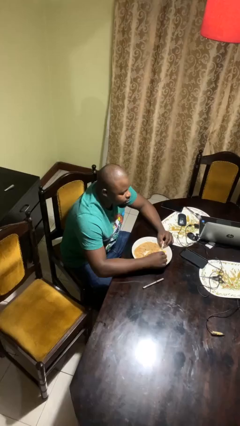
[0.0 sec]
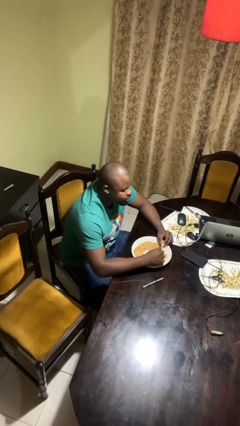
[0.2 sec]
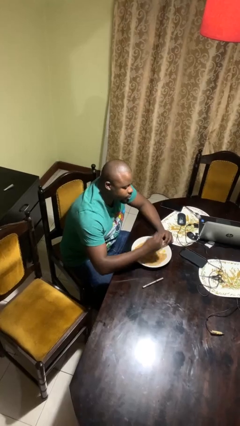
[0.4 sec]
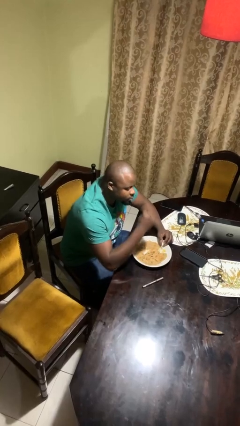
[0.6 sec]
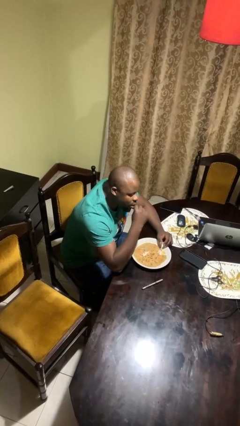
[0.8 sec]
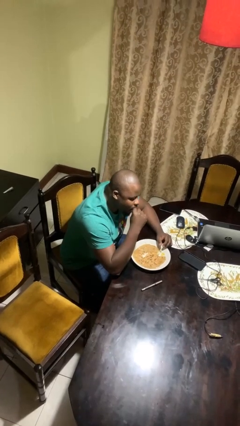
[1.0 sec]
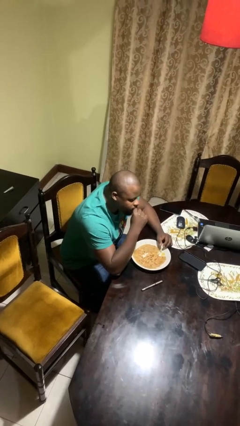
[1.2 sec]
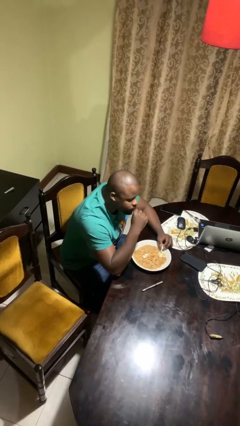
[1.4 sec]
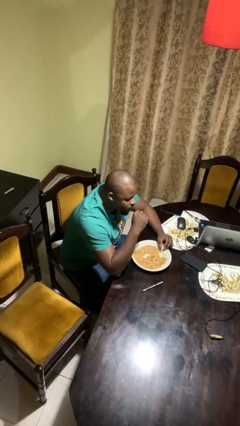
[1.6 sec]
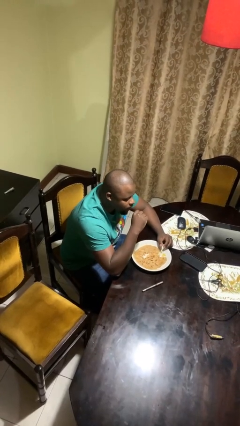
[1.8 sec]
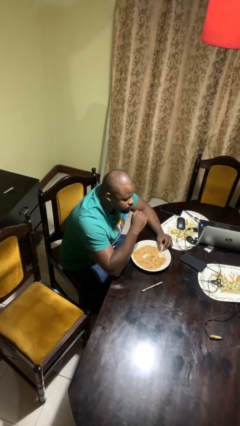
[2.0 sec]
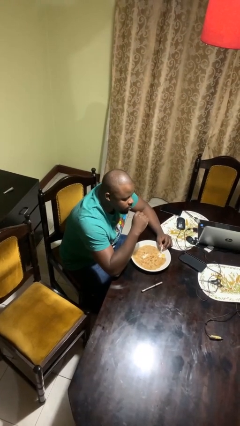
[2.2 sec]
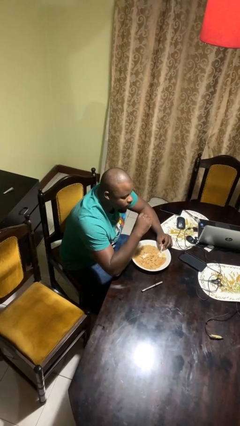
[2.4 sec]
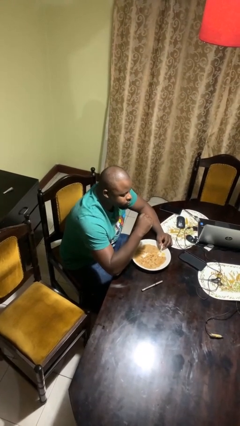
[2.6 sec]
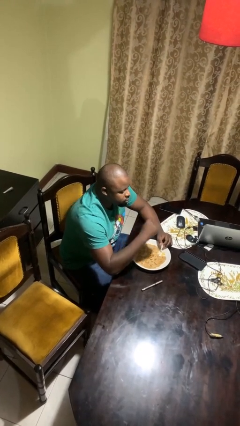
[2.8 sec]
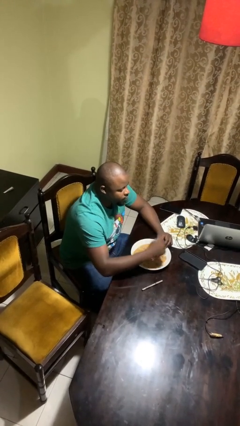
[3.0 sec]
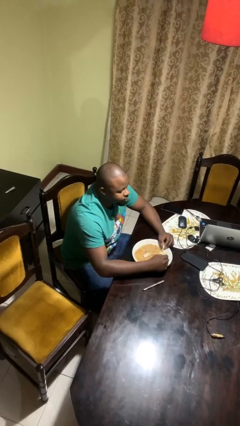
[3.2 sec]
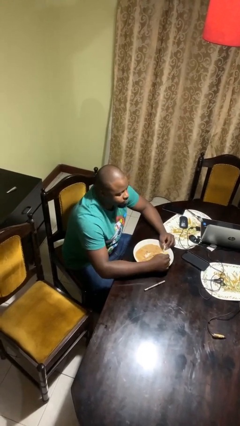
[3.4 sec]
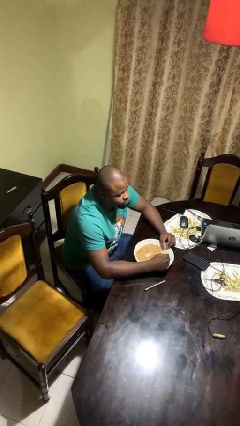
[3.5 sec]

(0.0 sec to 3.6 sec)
person eats with hands

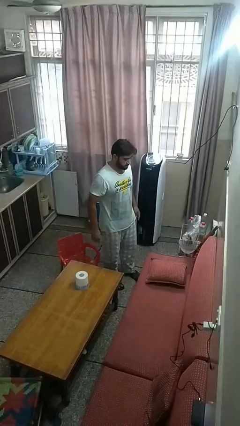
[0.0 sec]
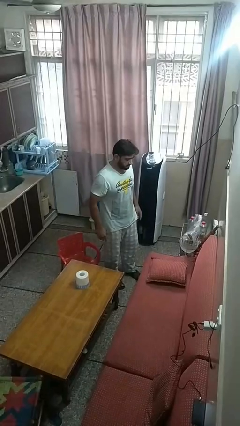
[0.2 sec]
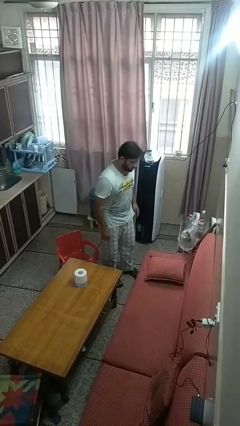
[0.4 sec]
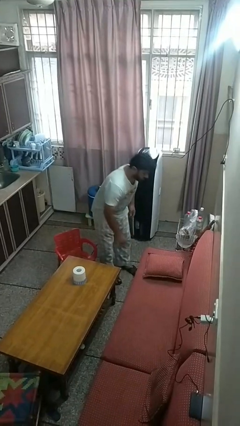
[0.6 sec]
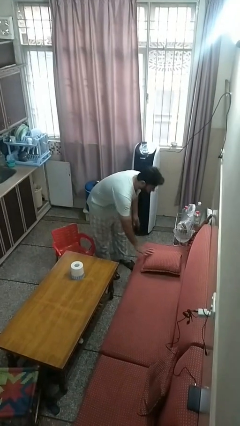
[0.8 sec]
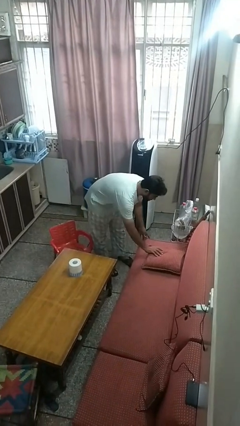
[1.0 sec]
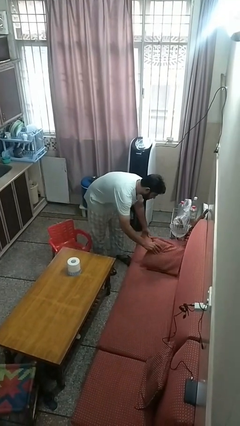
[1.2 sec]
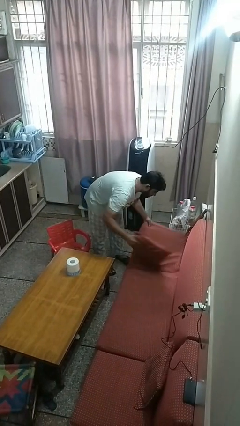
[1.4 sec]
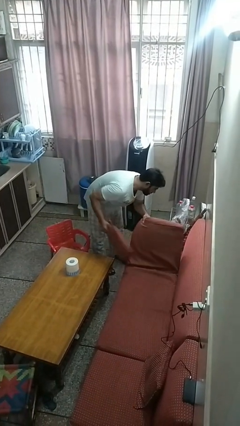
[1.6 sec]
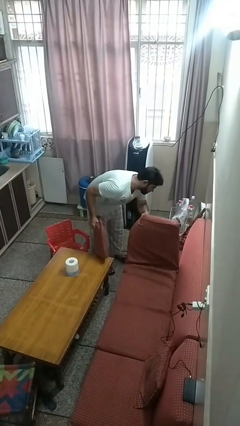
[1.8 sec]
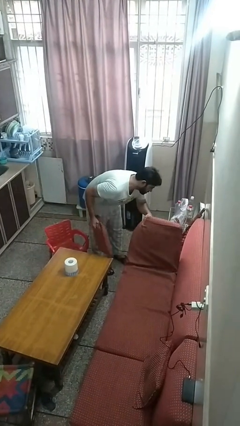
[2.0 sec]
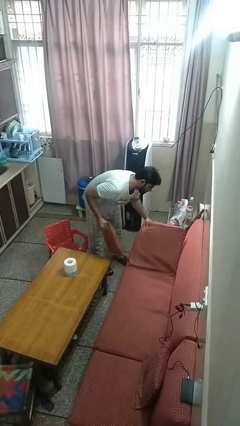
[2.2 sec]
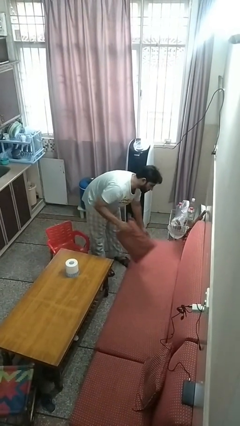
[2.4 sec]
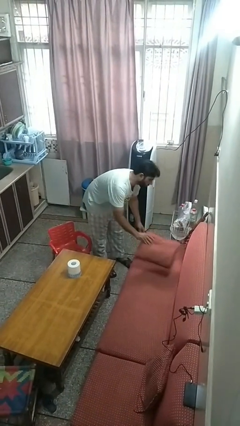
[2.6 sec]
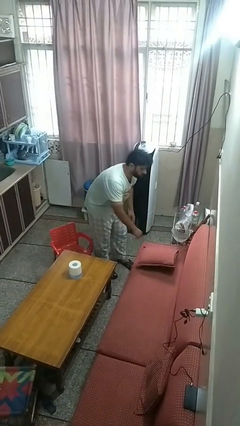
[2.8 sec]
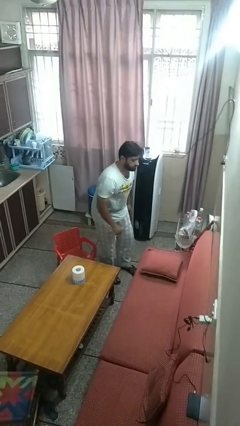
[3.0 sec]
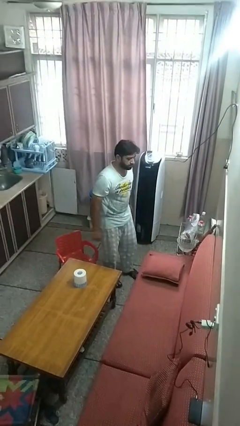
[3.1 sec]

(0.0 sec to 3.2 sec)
person searches under couch

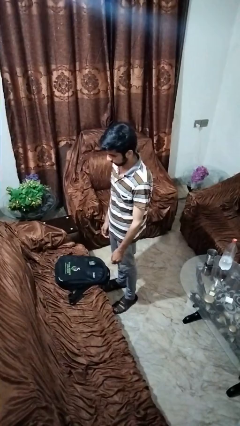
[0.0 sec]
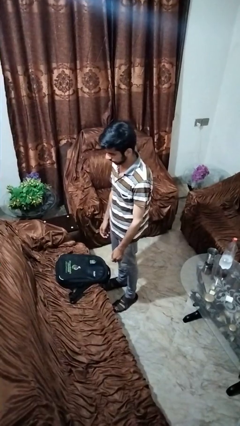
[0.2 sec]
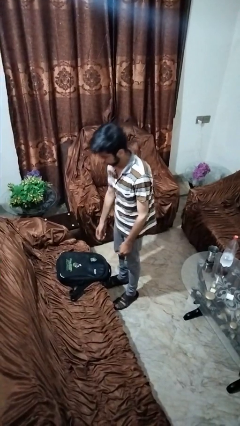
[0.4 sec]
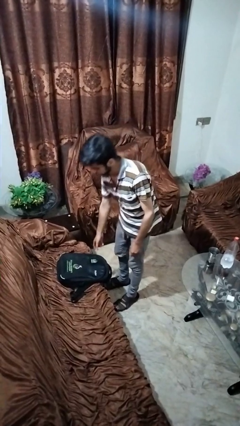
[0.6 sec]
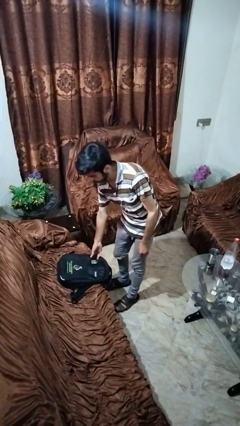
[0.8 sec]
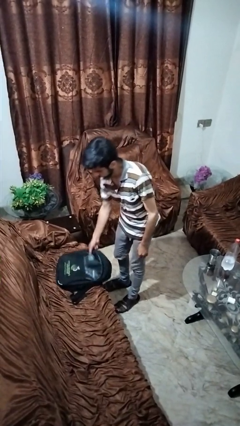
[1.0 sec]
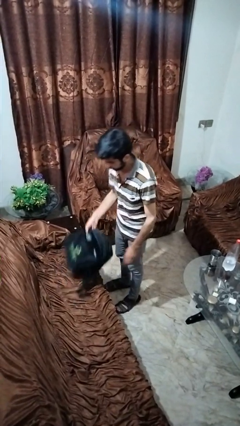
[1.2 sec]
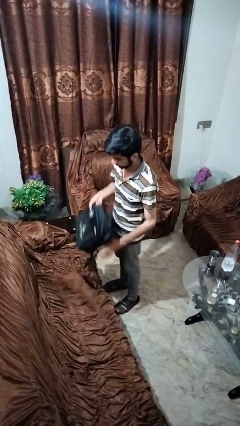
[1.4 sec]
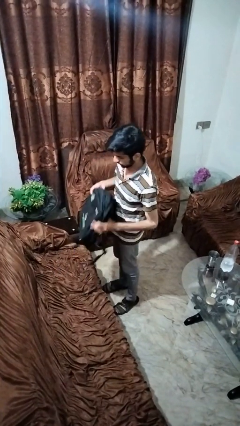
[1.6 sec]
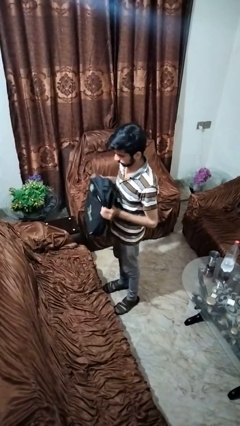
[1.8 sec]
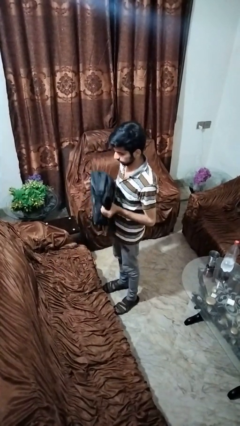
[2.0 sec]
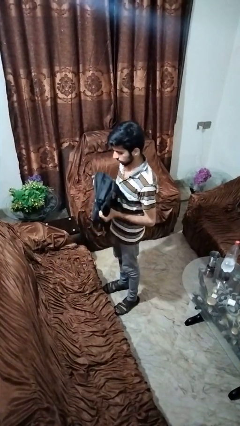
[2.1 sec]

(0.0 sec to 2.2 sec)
person picks up object from couch

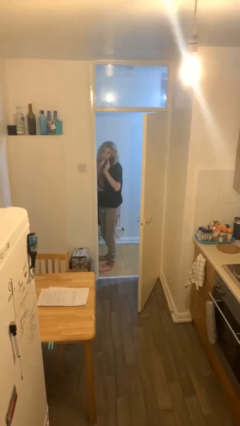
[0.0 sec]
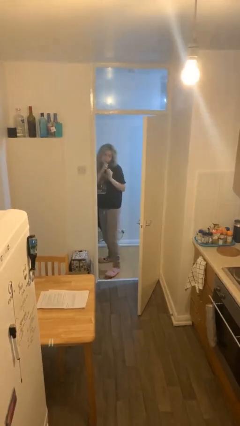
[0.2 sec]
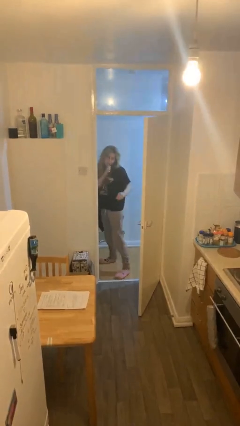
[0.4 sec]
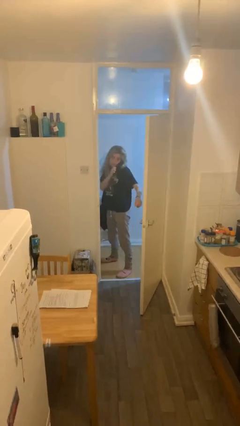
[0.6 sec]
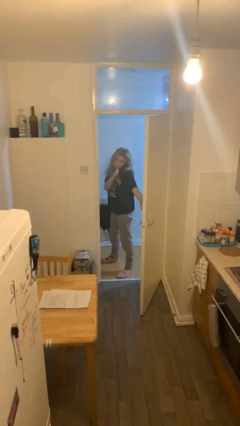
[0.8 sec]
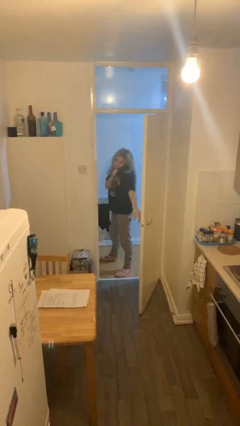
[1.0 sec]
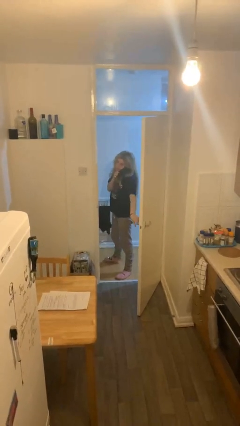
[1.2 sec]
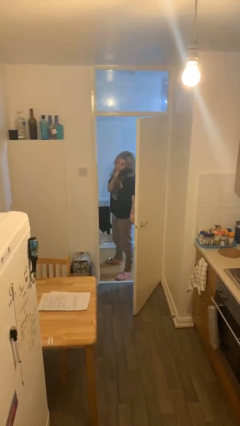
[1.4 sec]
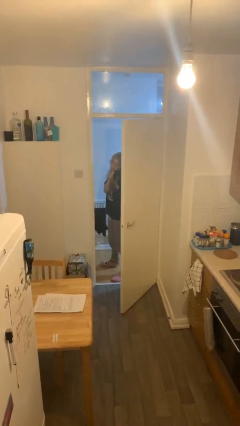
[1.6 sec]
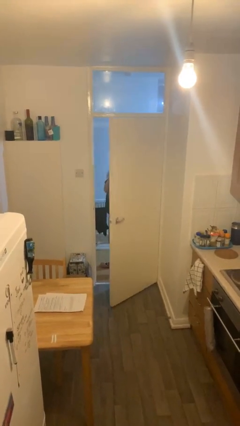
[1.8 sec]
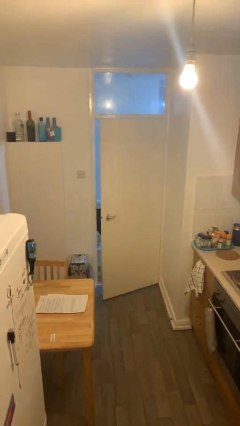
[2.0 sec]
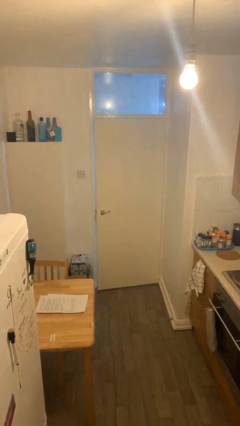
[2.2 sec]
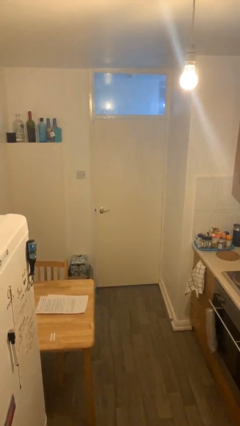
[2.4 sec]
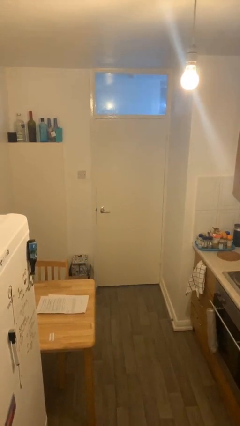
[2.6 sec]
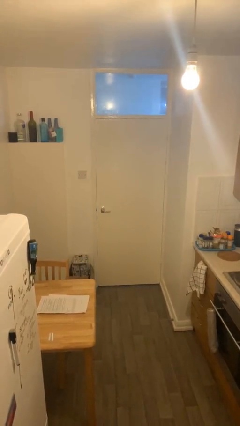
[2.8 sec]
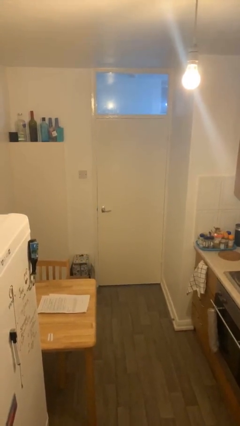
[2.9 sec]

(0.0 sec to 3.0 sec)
person closes facility door

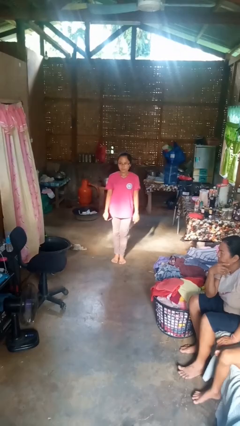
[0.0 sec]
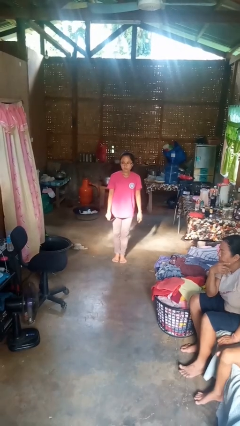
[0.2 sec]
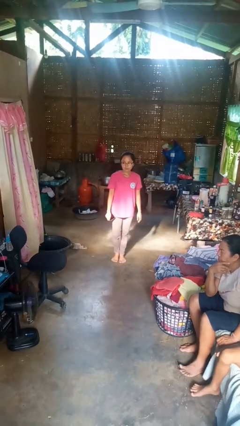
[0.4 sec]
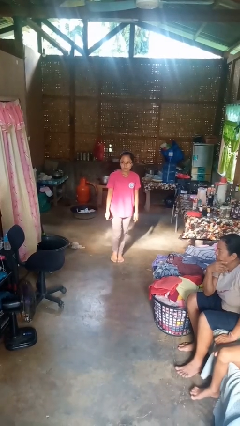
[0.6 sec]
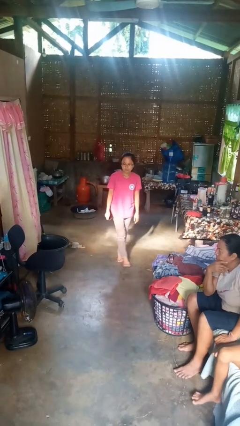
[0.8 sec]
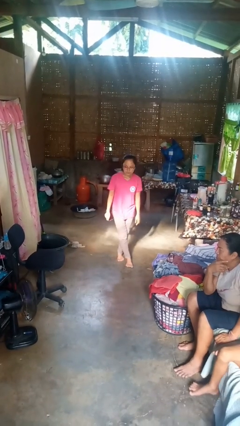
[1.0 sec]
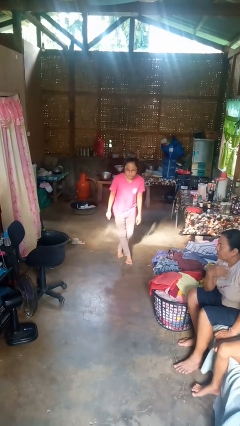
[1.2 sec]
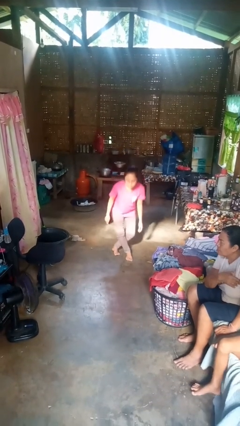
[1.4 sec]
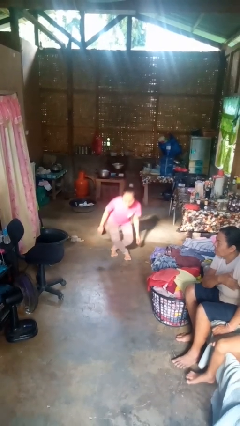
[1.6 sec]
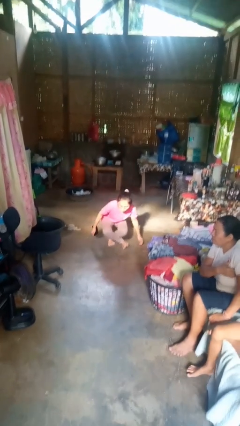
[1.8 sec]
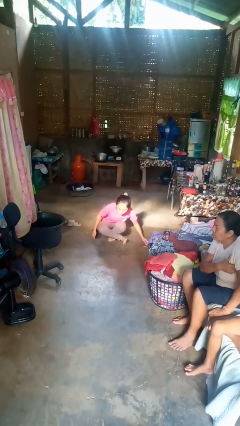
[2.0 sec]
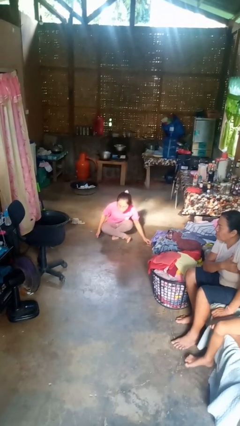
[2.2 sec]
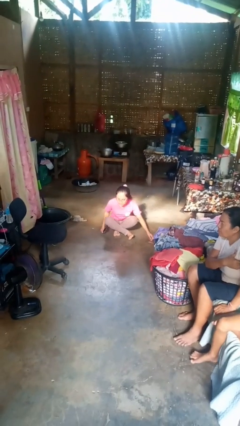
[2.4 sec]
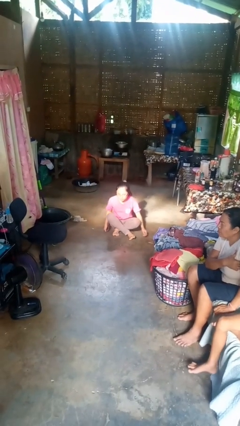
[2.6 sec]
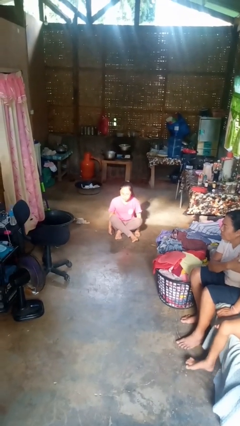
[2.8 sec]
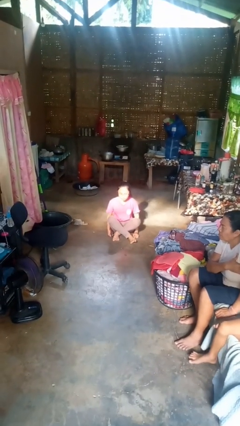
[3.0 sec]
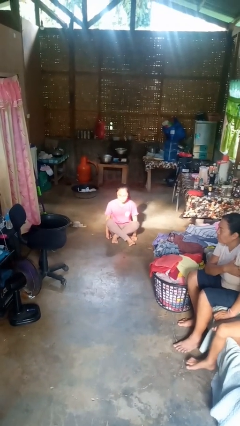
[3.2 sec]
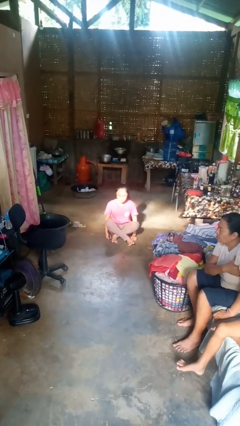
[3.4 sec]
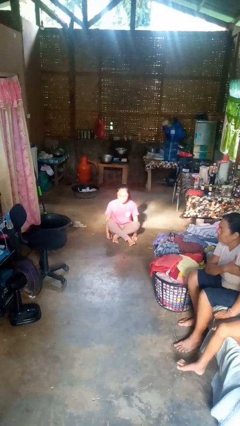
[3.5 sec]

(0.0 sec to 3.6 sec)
person sits crisscross

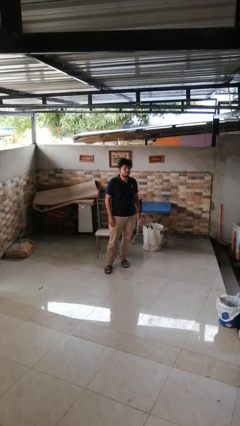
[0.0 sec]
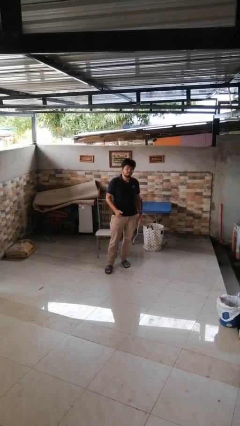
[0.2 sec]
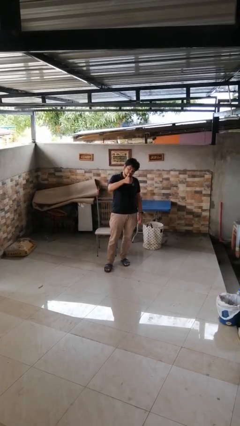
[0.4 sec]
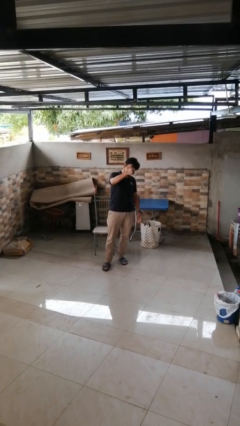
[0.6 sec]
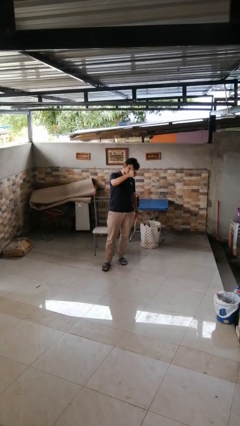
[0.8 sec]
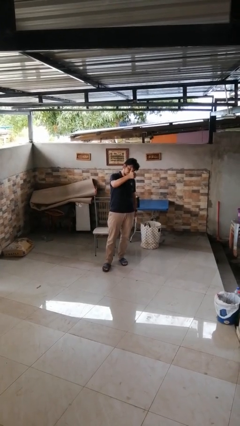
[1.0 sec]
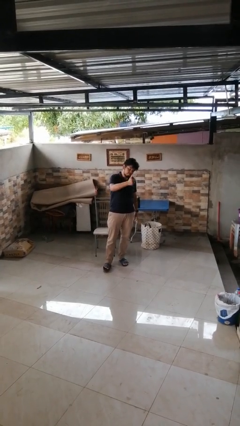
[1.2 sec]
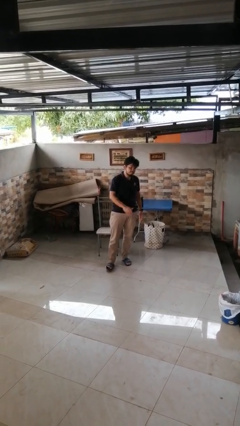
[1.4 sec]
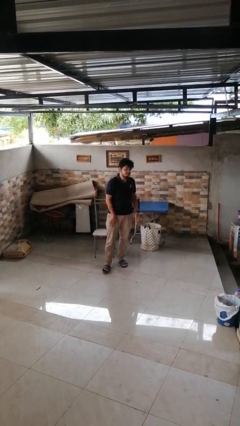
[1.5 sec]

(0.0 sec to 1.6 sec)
person gestures thumbs up
